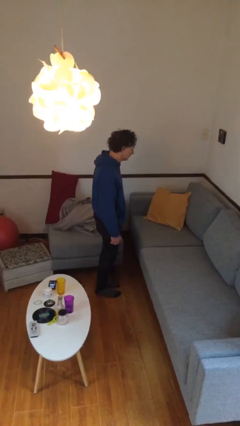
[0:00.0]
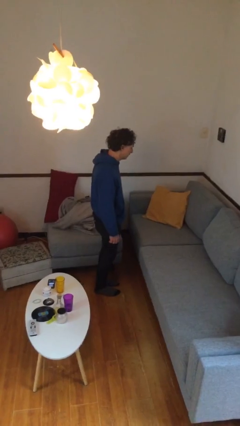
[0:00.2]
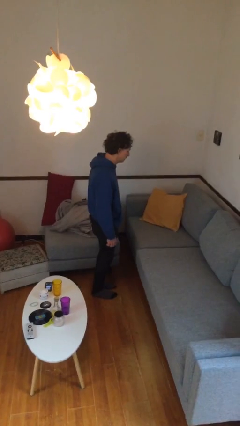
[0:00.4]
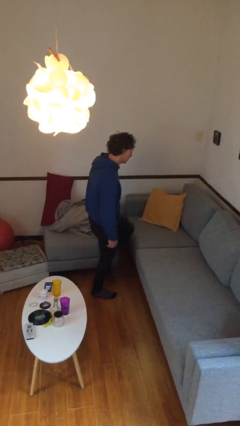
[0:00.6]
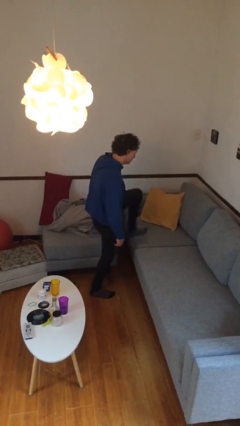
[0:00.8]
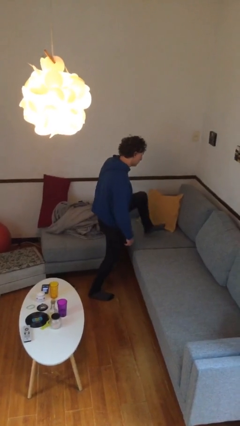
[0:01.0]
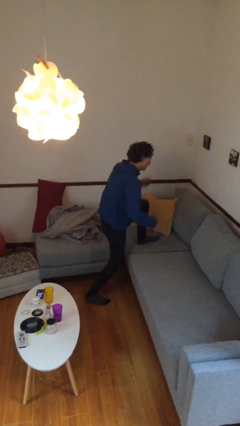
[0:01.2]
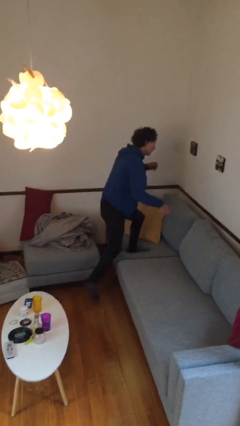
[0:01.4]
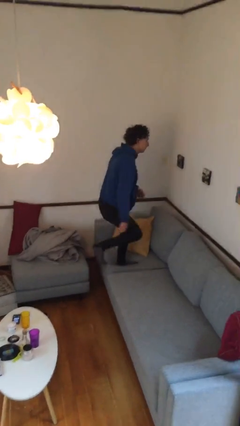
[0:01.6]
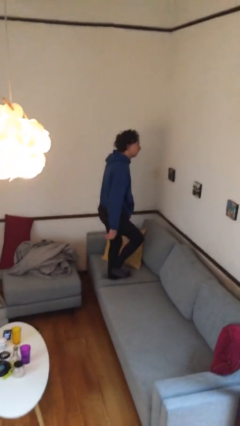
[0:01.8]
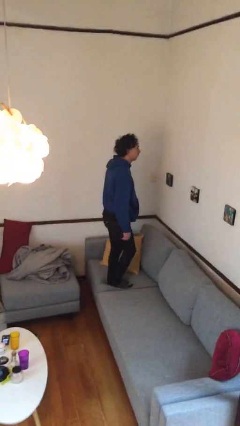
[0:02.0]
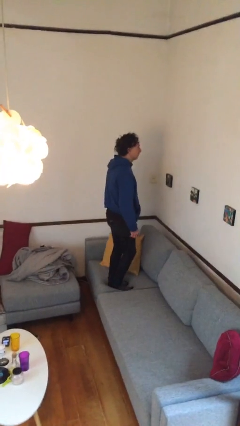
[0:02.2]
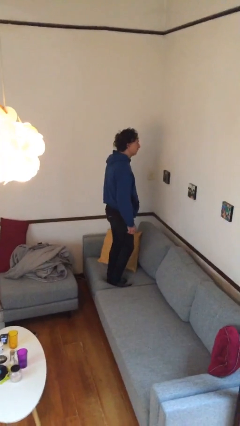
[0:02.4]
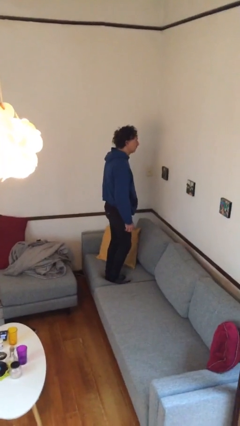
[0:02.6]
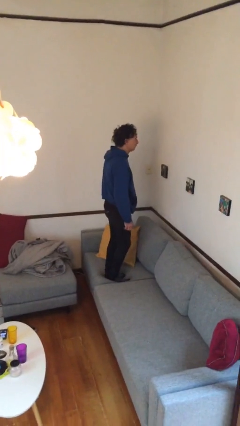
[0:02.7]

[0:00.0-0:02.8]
person climbs on couch

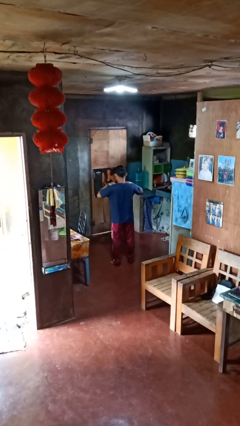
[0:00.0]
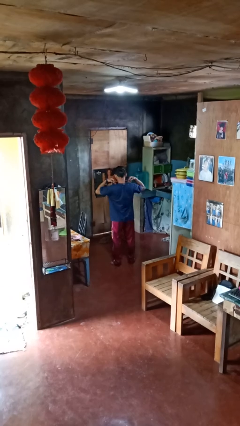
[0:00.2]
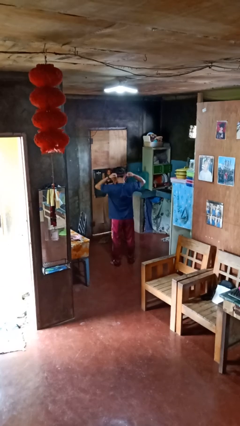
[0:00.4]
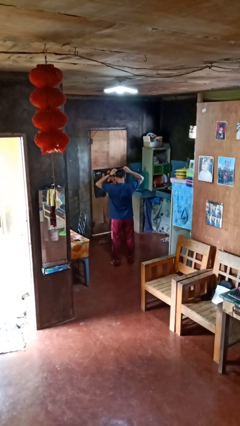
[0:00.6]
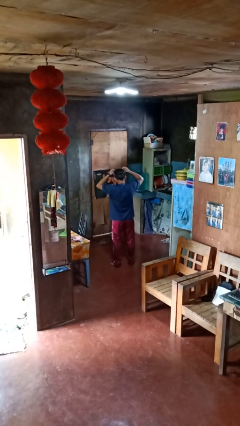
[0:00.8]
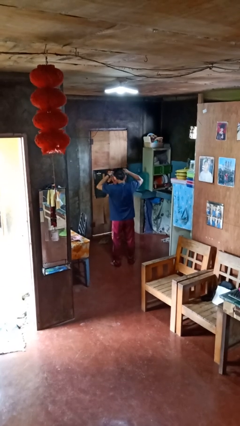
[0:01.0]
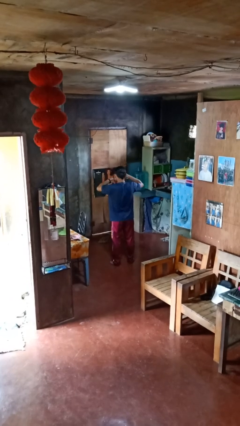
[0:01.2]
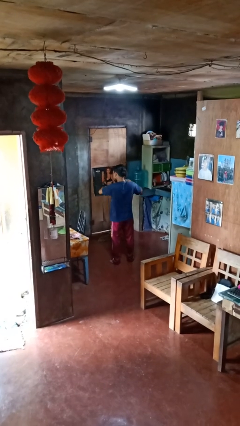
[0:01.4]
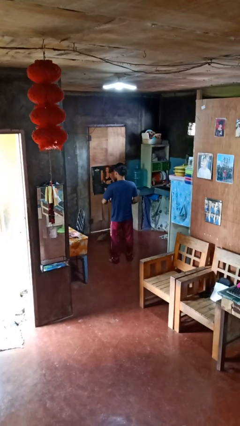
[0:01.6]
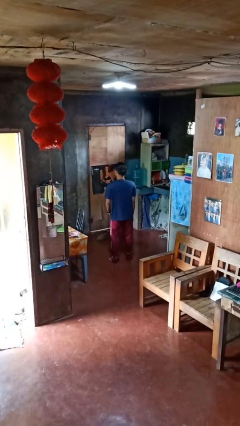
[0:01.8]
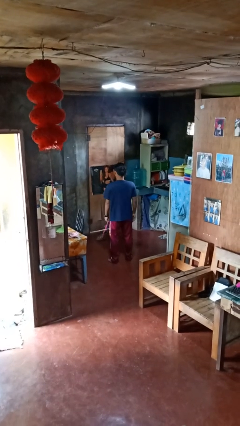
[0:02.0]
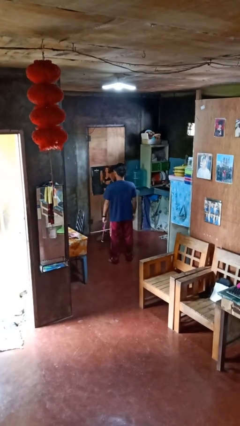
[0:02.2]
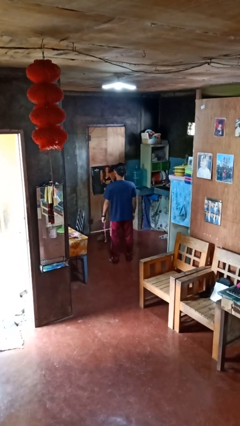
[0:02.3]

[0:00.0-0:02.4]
person takes off necklace

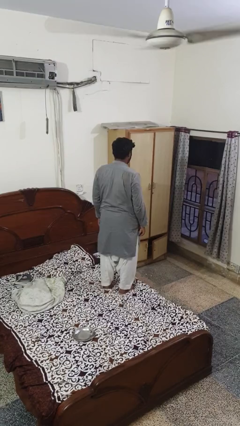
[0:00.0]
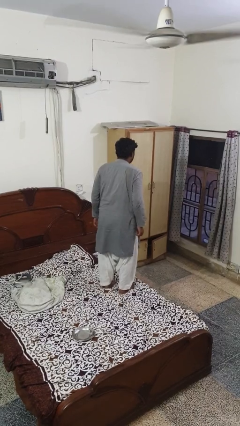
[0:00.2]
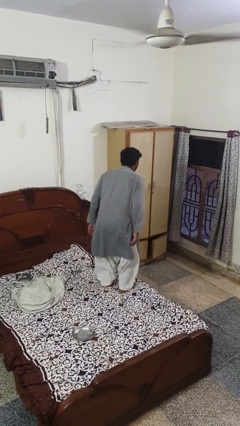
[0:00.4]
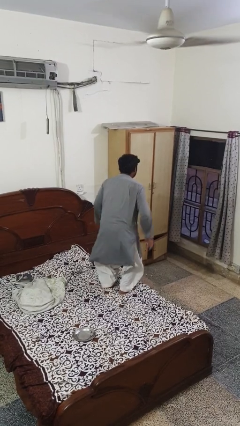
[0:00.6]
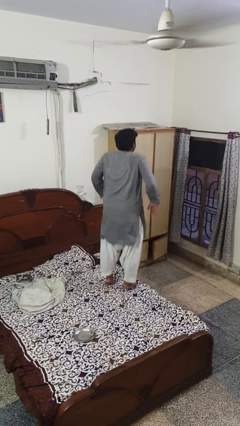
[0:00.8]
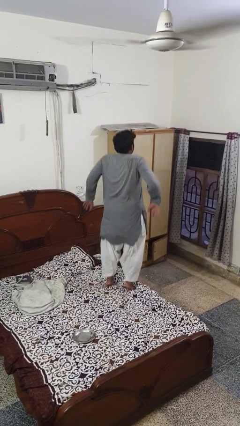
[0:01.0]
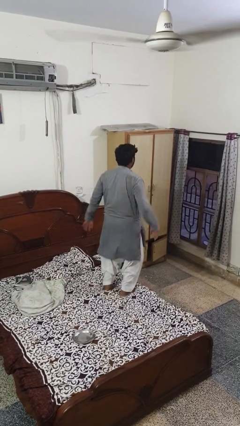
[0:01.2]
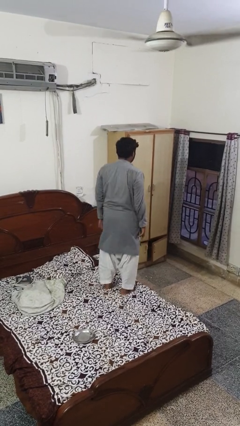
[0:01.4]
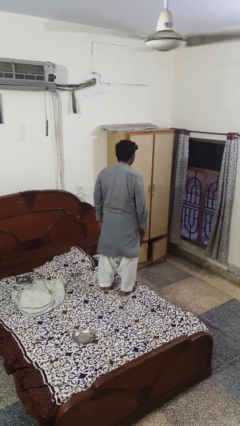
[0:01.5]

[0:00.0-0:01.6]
person jumps on bed

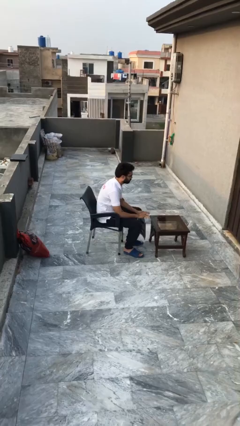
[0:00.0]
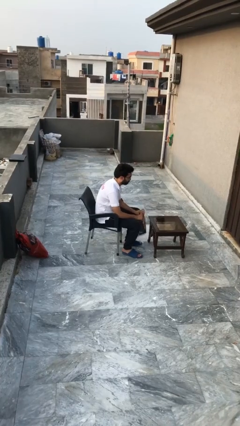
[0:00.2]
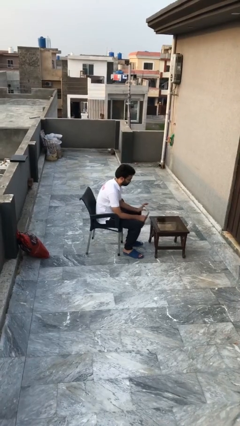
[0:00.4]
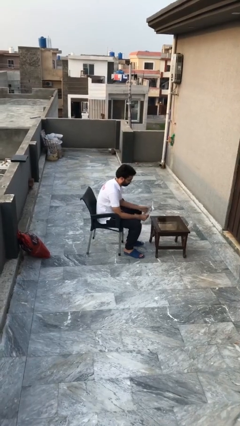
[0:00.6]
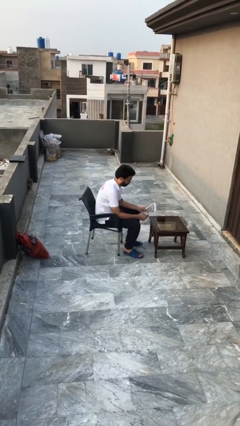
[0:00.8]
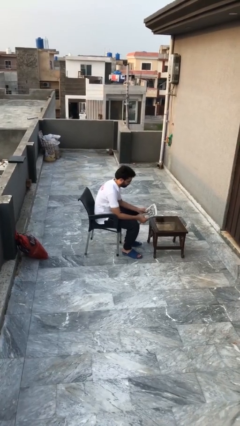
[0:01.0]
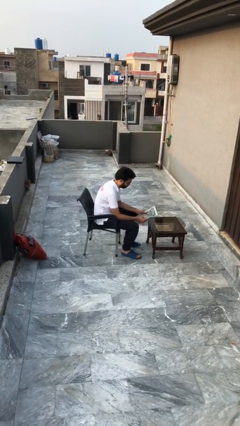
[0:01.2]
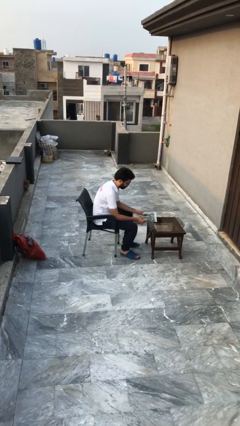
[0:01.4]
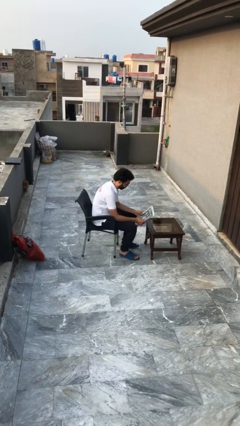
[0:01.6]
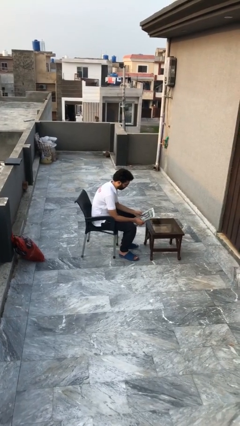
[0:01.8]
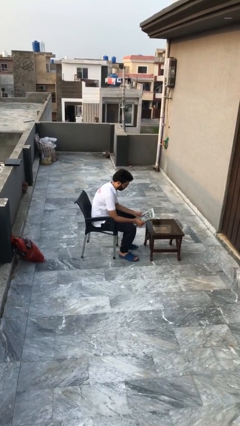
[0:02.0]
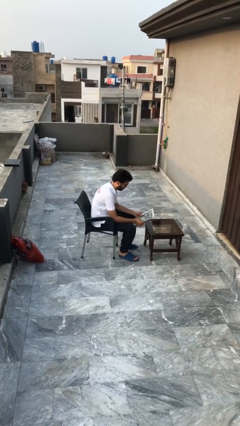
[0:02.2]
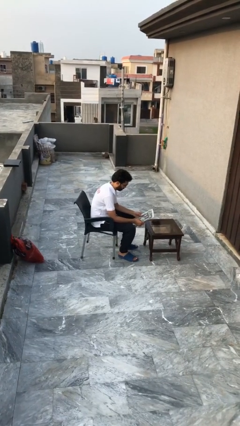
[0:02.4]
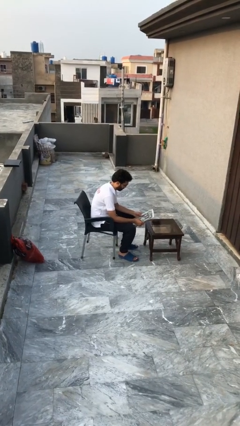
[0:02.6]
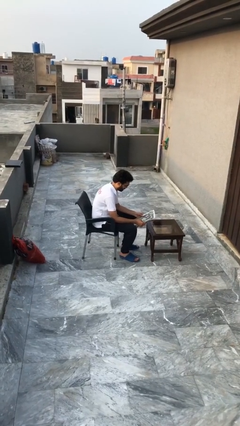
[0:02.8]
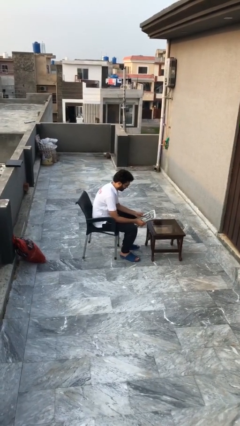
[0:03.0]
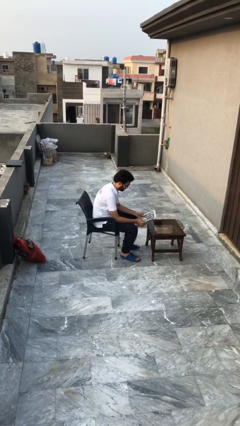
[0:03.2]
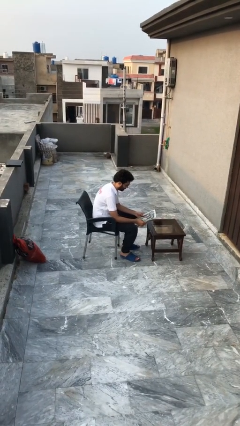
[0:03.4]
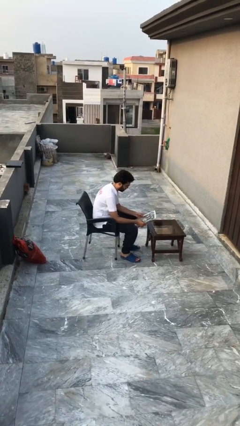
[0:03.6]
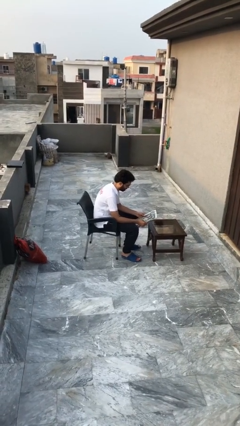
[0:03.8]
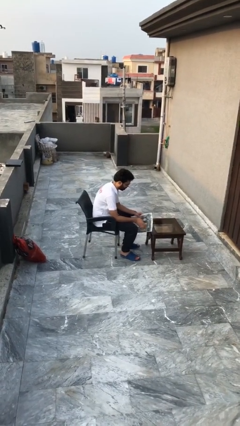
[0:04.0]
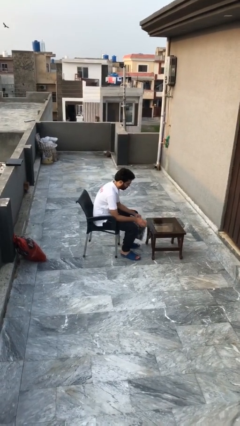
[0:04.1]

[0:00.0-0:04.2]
person reads document

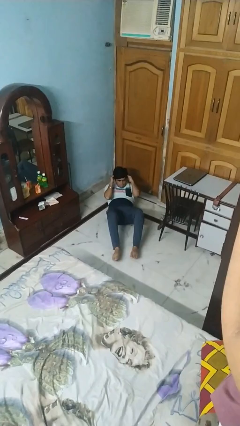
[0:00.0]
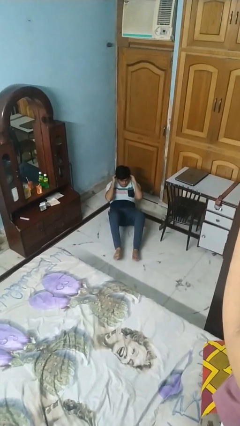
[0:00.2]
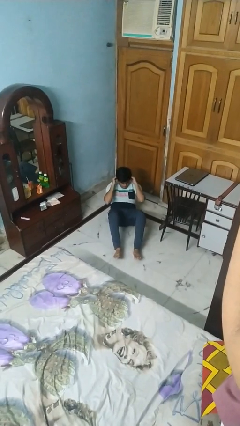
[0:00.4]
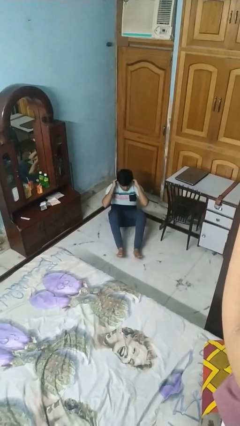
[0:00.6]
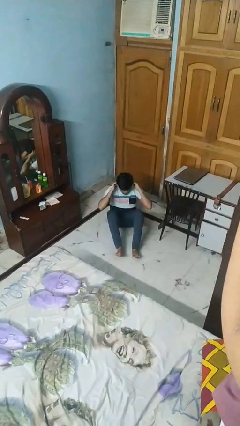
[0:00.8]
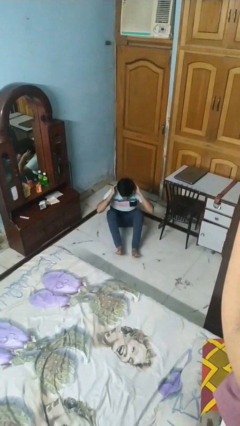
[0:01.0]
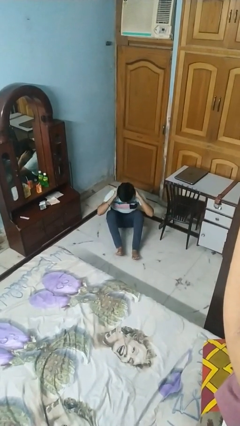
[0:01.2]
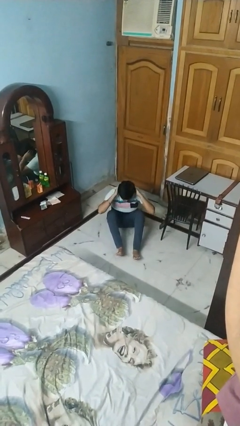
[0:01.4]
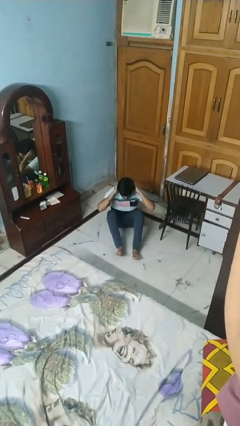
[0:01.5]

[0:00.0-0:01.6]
person exercises with situp

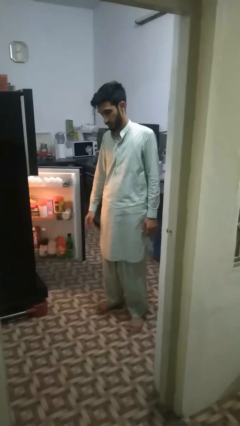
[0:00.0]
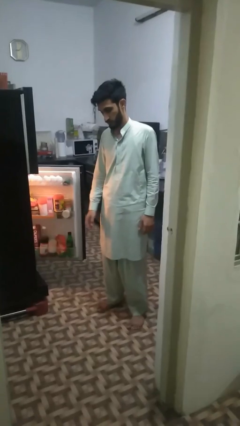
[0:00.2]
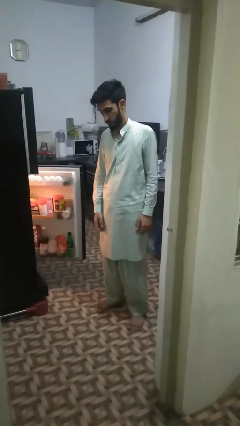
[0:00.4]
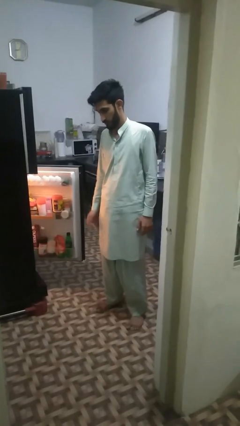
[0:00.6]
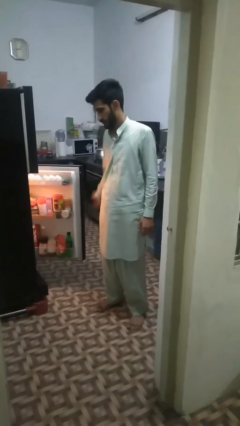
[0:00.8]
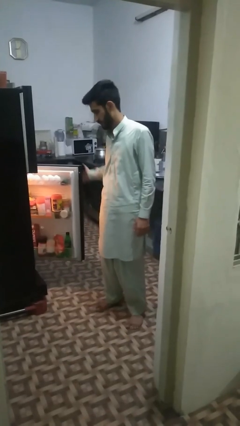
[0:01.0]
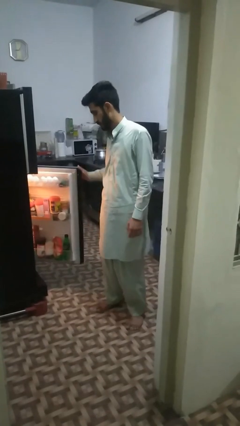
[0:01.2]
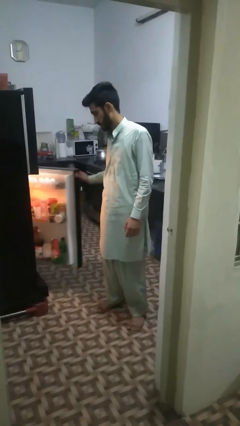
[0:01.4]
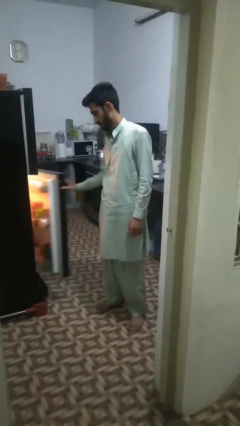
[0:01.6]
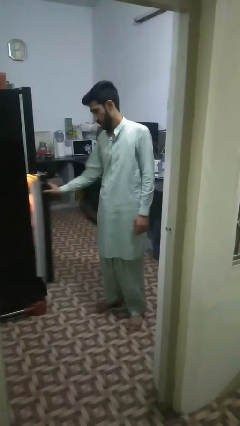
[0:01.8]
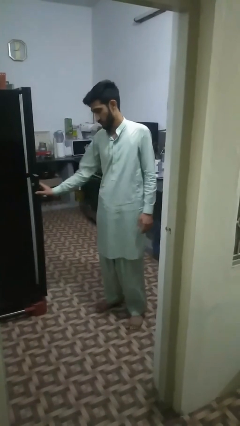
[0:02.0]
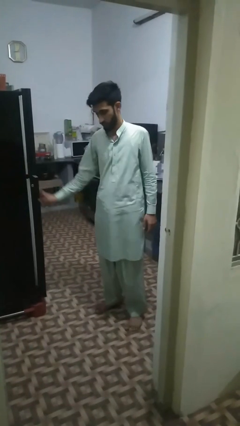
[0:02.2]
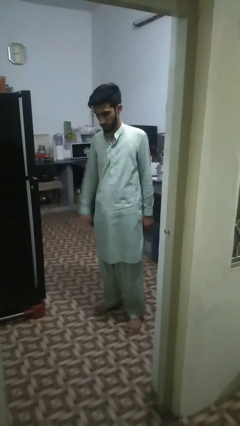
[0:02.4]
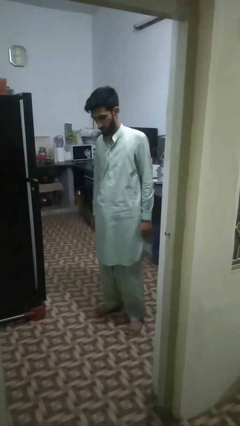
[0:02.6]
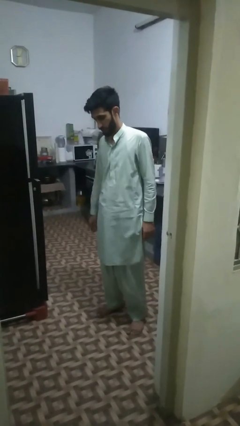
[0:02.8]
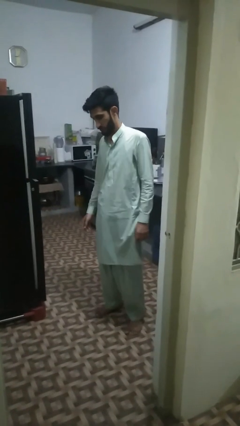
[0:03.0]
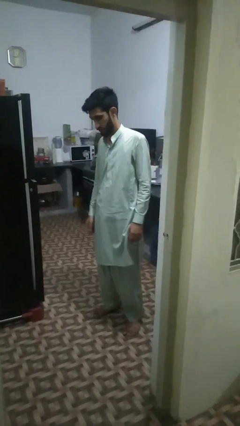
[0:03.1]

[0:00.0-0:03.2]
person closes refrigerator

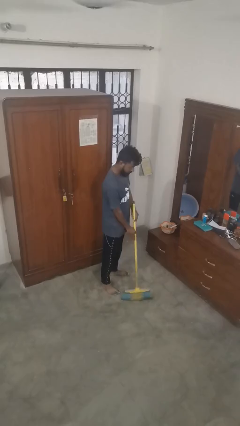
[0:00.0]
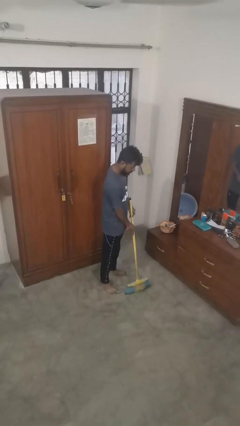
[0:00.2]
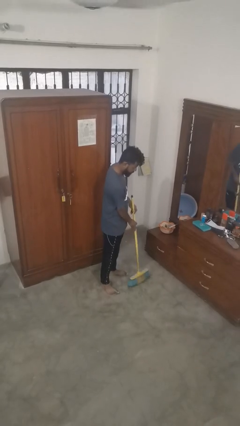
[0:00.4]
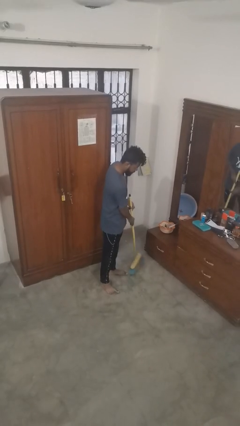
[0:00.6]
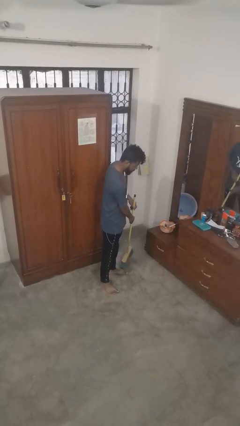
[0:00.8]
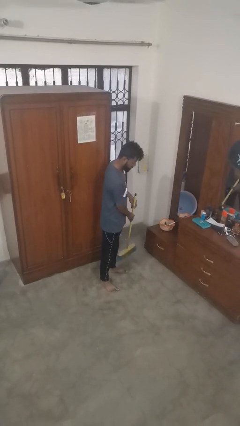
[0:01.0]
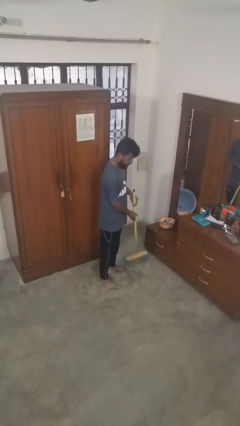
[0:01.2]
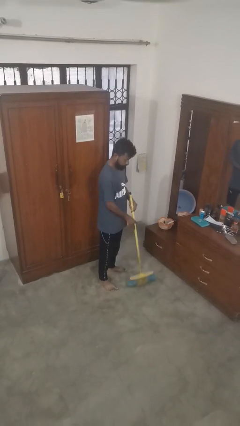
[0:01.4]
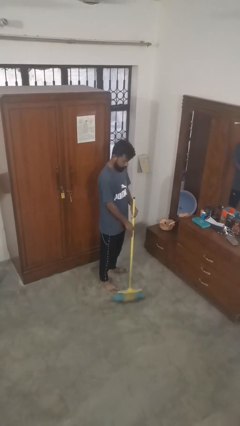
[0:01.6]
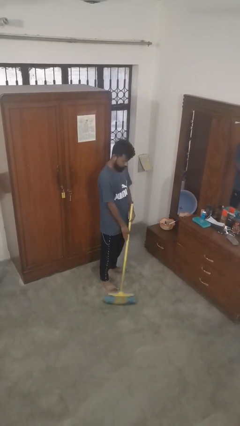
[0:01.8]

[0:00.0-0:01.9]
person sweeps floor
